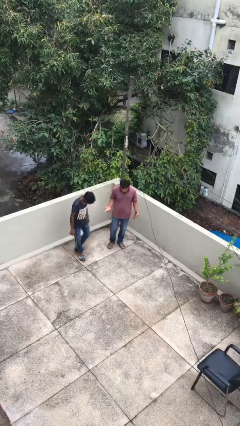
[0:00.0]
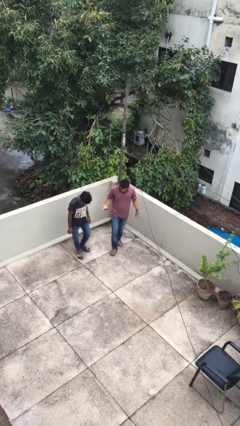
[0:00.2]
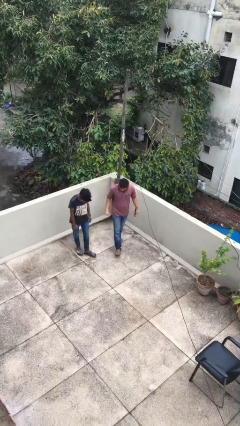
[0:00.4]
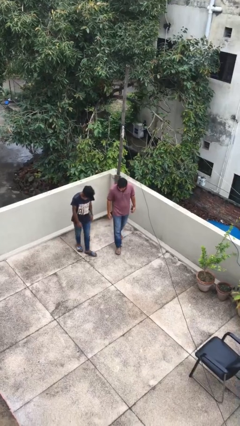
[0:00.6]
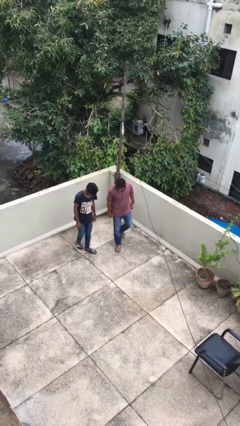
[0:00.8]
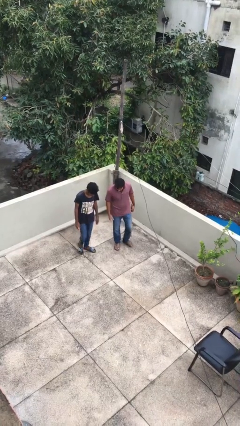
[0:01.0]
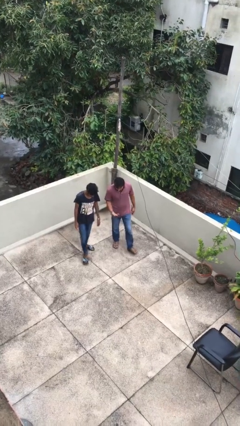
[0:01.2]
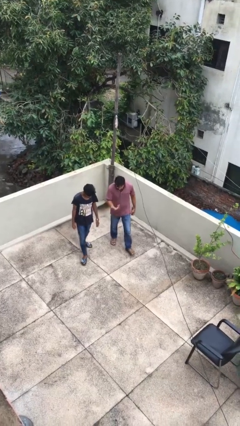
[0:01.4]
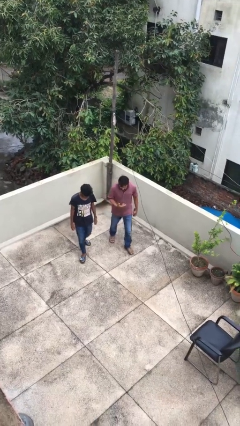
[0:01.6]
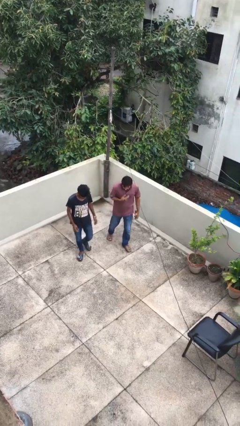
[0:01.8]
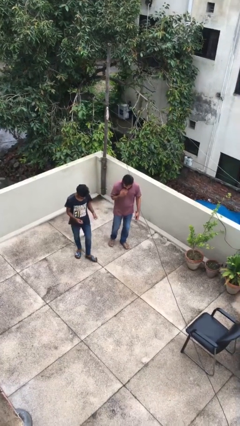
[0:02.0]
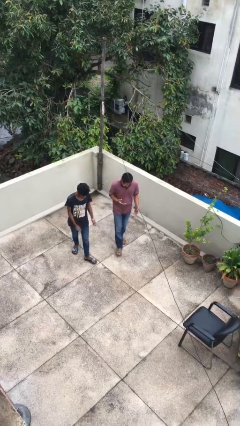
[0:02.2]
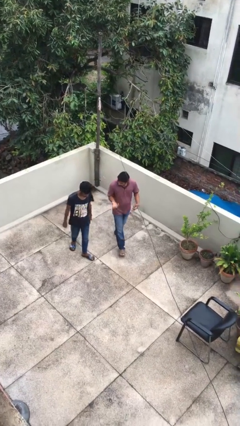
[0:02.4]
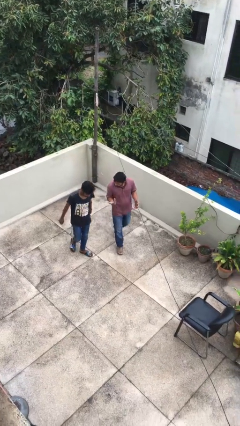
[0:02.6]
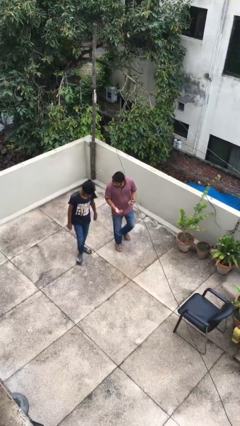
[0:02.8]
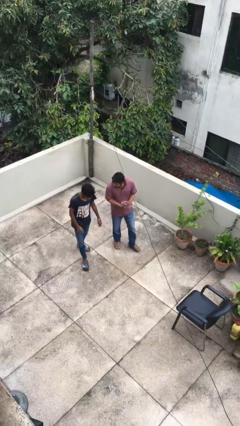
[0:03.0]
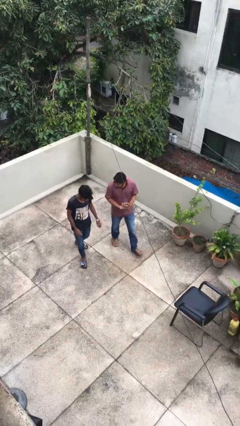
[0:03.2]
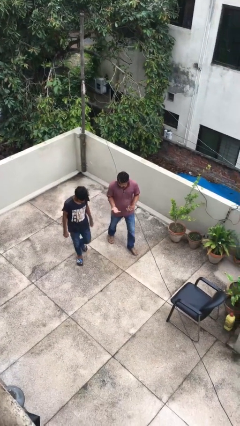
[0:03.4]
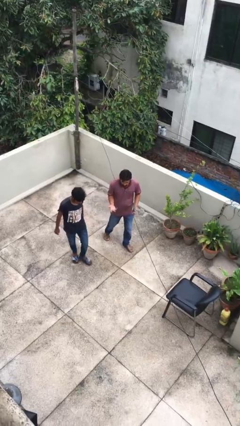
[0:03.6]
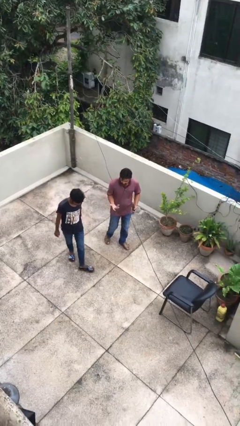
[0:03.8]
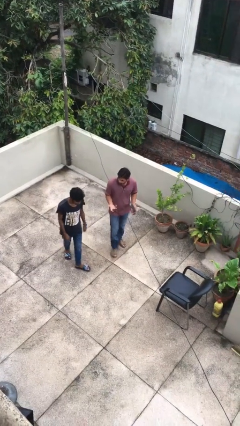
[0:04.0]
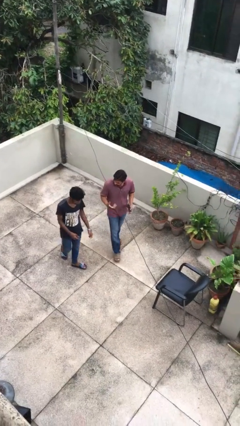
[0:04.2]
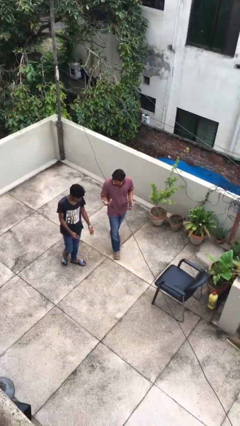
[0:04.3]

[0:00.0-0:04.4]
person talks to person

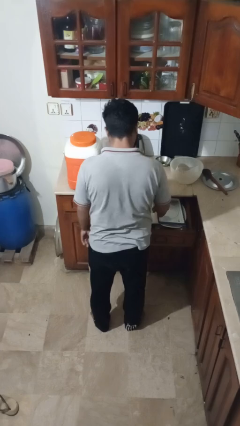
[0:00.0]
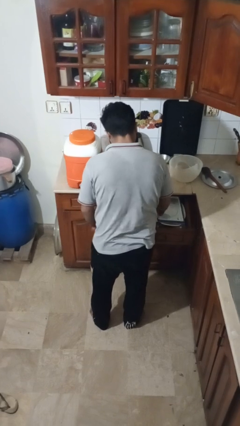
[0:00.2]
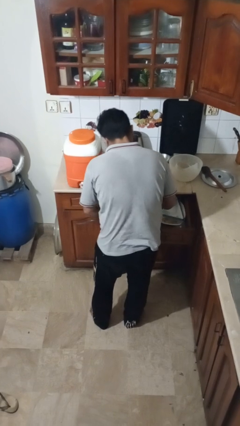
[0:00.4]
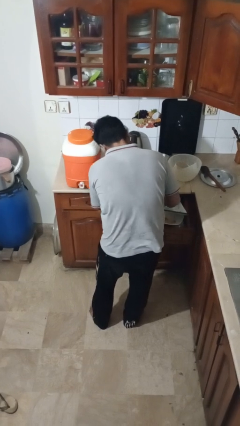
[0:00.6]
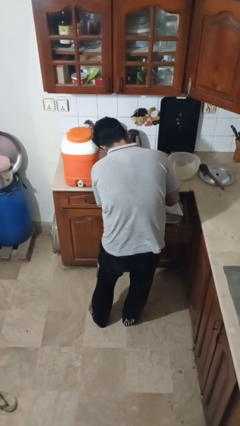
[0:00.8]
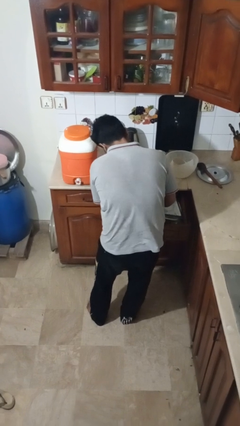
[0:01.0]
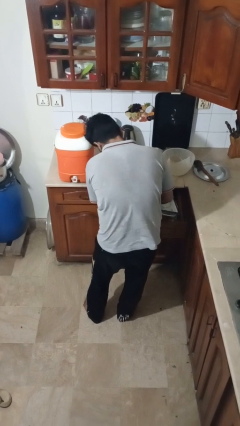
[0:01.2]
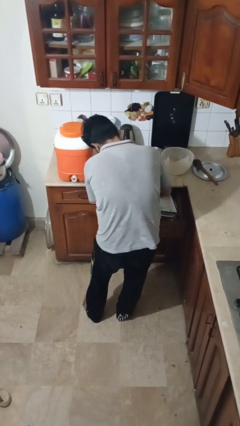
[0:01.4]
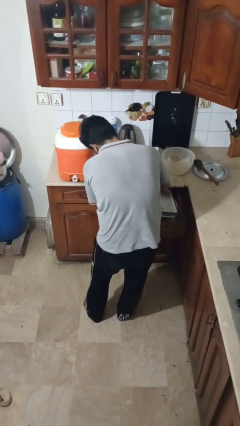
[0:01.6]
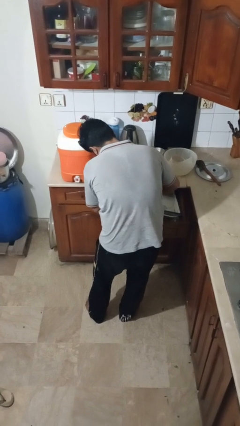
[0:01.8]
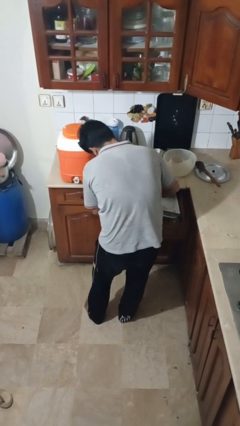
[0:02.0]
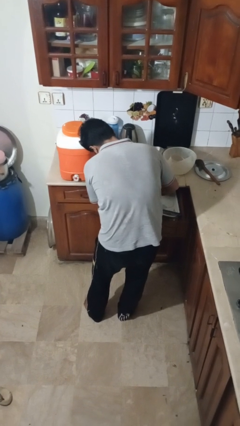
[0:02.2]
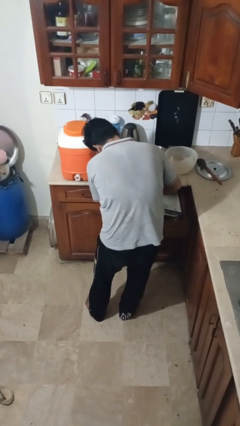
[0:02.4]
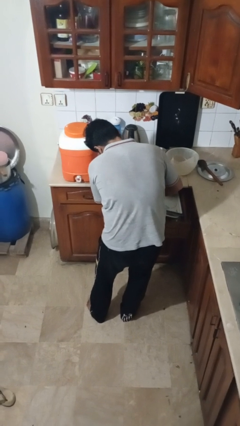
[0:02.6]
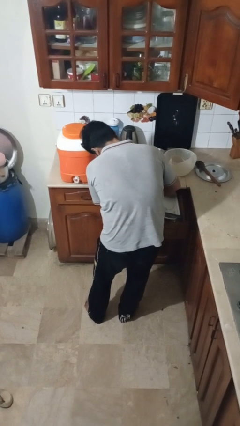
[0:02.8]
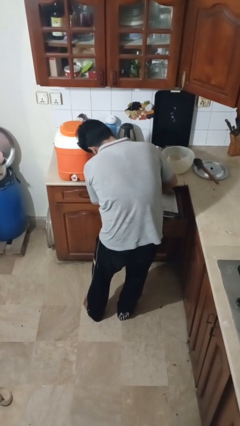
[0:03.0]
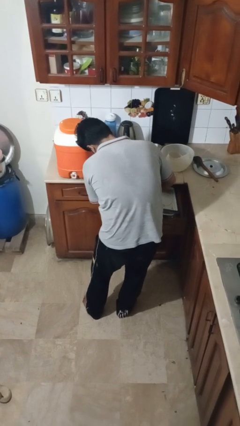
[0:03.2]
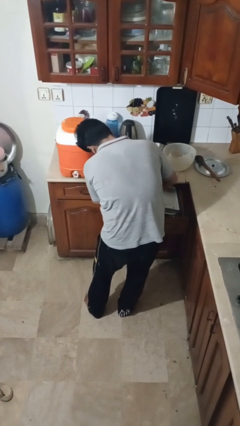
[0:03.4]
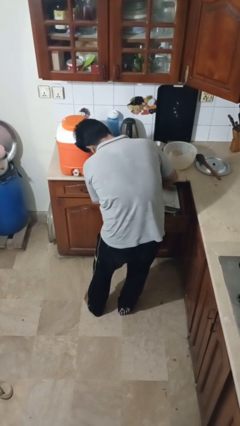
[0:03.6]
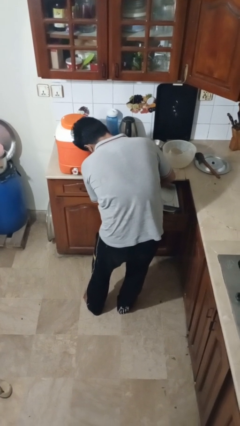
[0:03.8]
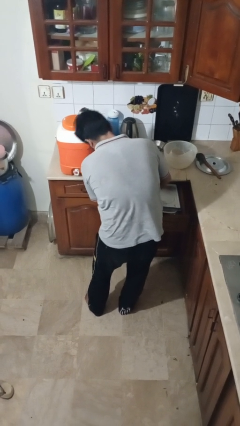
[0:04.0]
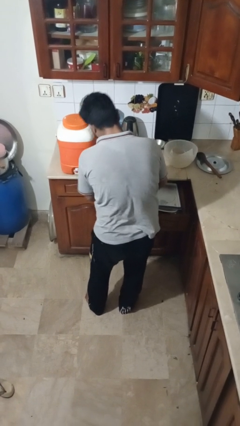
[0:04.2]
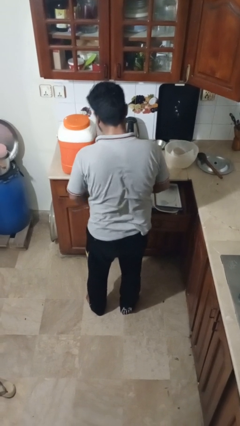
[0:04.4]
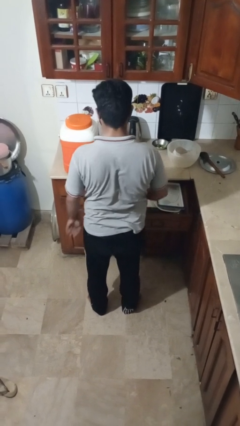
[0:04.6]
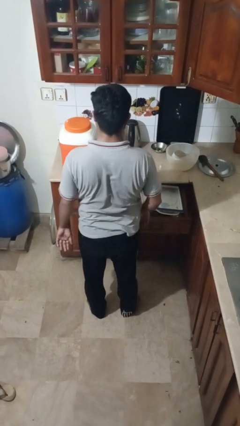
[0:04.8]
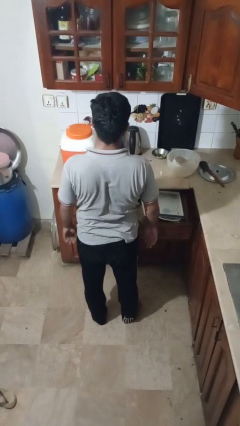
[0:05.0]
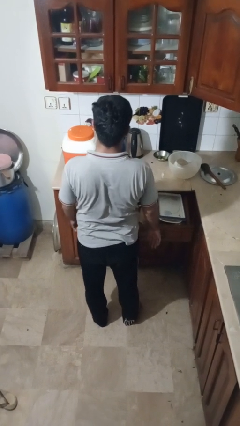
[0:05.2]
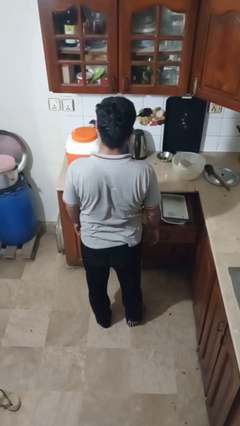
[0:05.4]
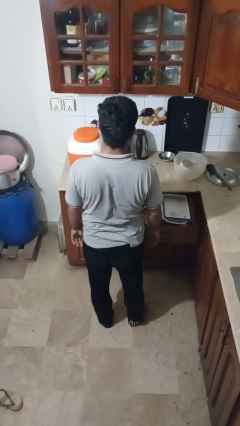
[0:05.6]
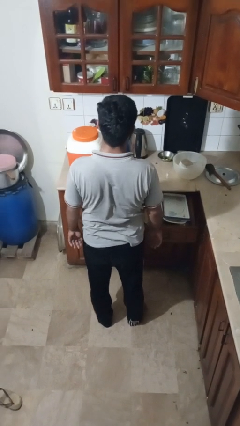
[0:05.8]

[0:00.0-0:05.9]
person searches in kitchen drawer

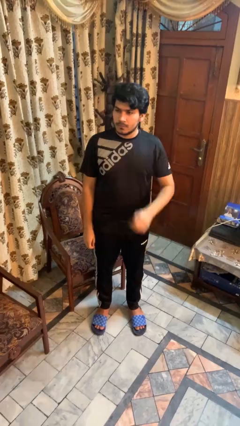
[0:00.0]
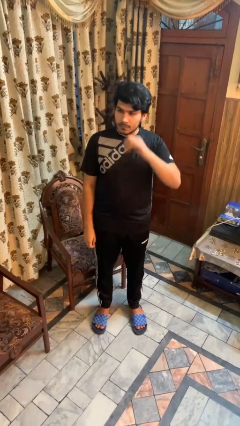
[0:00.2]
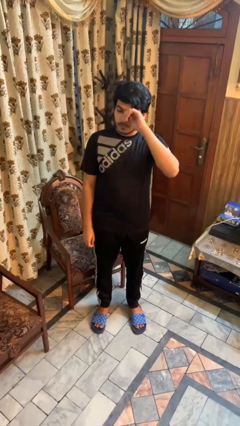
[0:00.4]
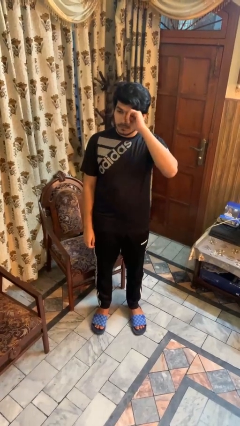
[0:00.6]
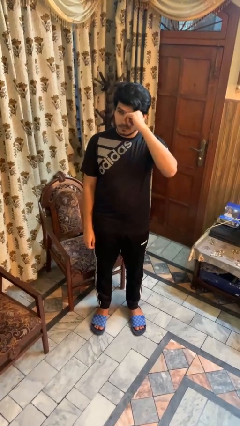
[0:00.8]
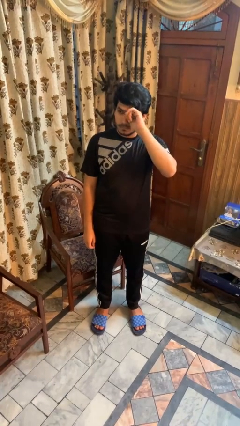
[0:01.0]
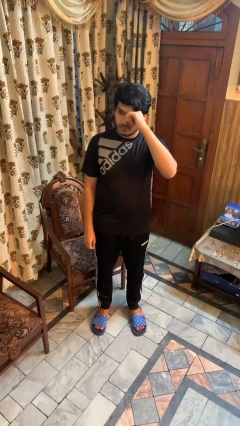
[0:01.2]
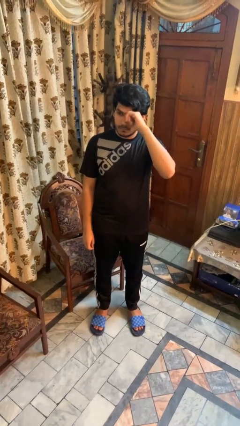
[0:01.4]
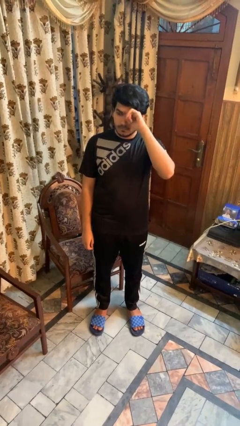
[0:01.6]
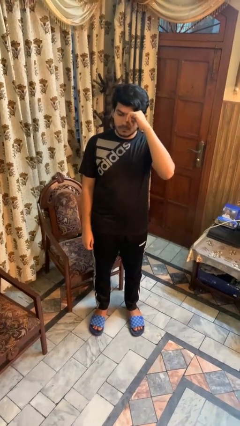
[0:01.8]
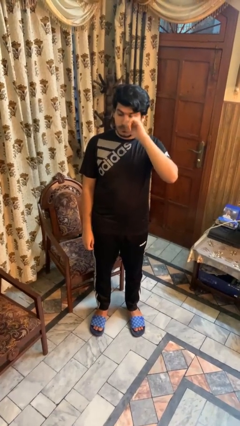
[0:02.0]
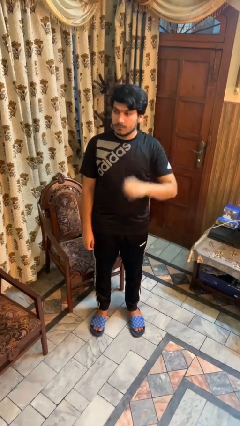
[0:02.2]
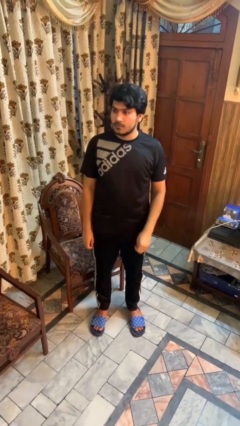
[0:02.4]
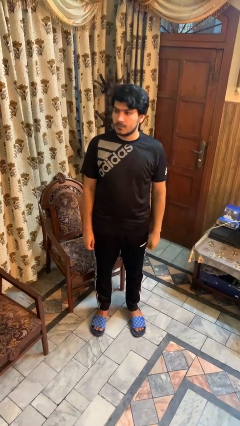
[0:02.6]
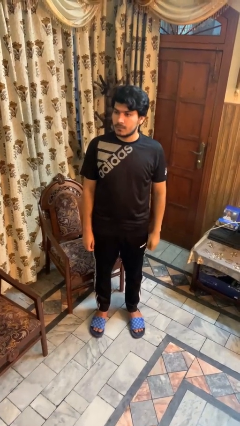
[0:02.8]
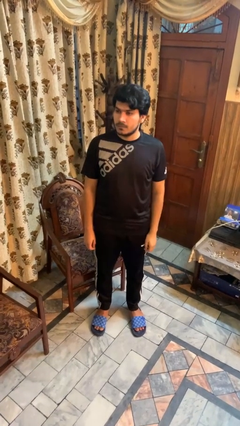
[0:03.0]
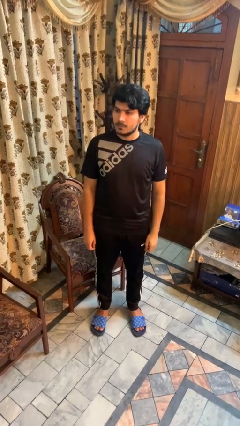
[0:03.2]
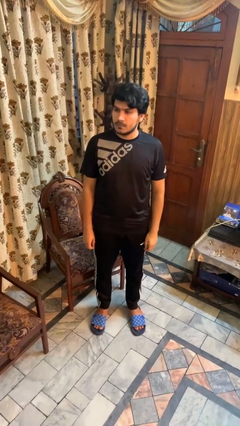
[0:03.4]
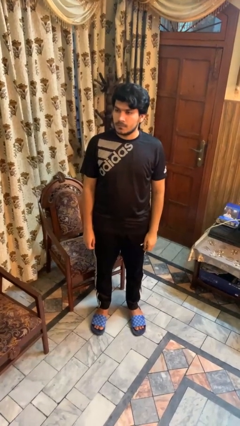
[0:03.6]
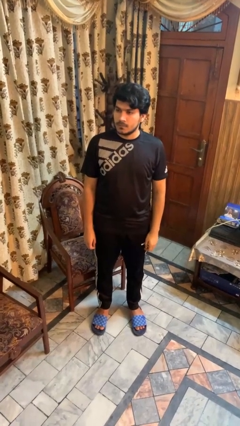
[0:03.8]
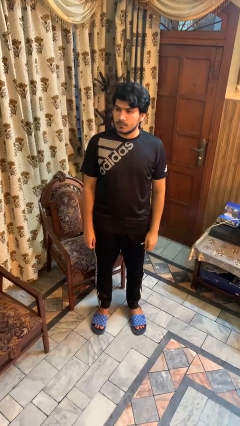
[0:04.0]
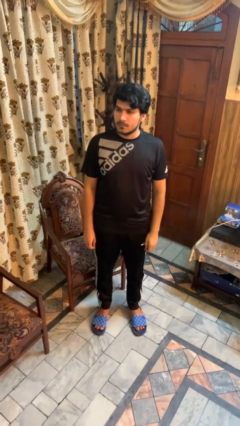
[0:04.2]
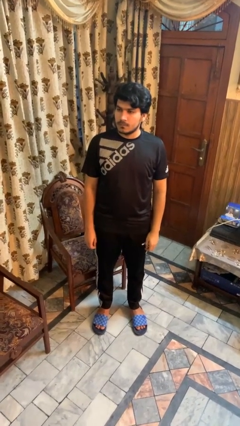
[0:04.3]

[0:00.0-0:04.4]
person rubs eyes

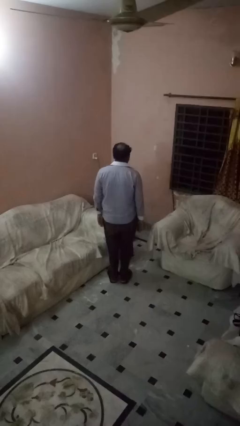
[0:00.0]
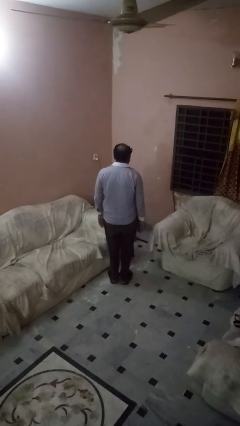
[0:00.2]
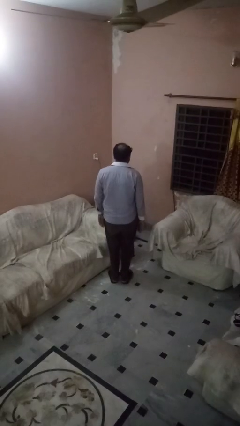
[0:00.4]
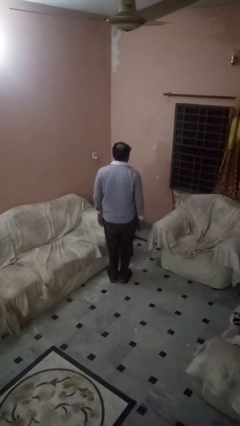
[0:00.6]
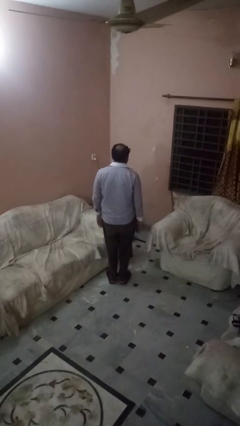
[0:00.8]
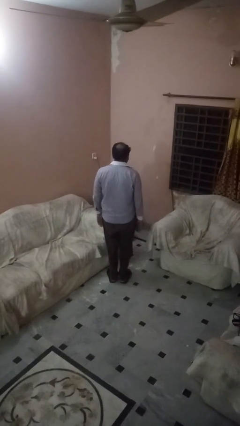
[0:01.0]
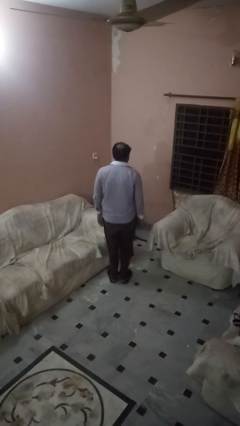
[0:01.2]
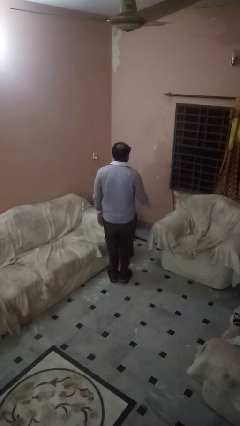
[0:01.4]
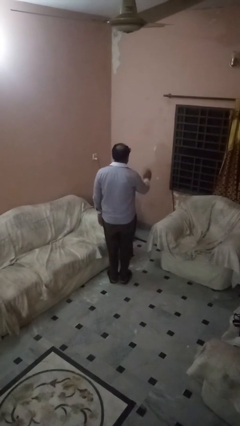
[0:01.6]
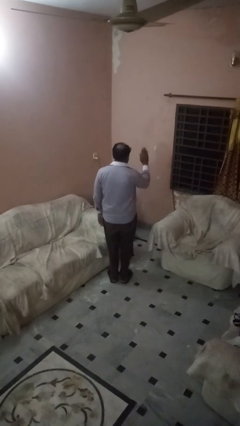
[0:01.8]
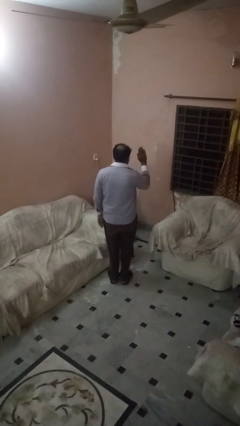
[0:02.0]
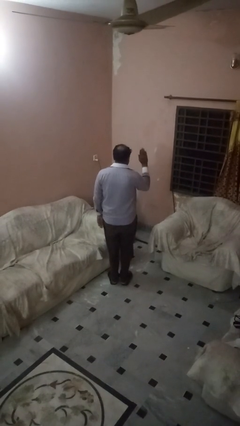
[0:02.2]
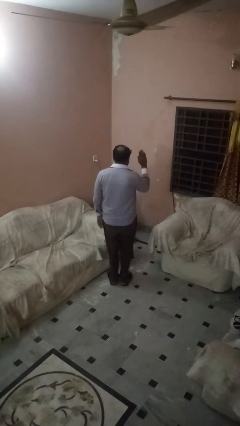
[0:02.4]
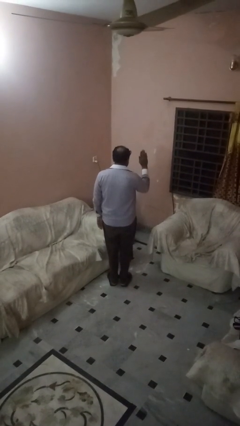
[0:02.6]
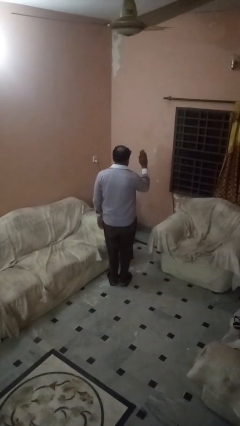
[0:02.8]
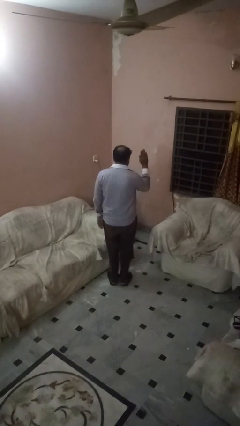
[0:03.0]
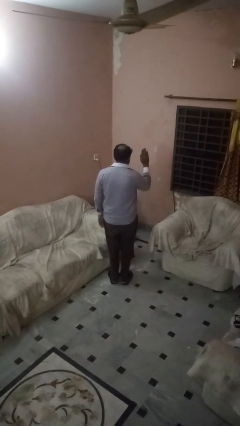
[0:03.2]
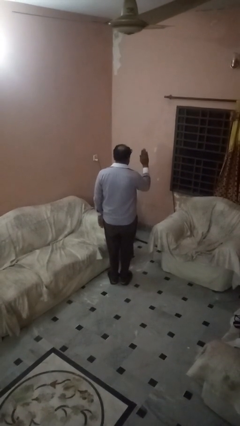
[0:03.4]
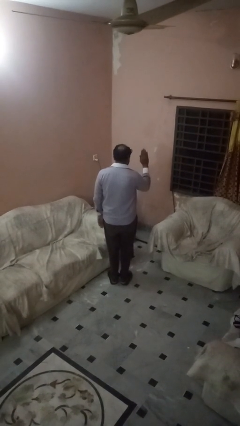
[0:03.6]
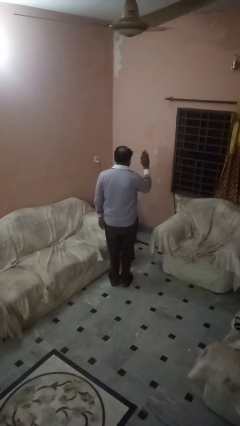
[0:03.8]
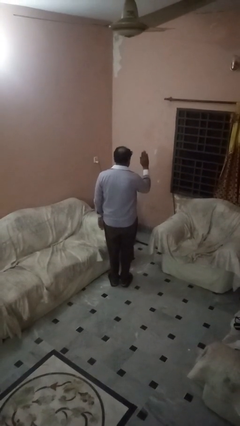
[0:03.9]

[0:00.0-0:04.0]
person gestures stop
